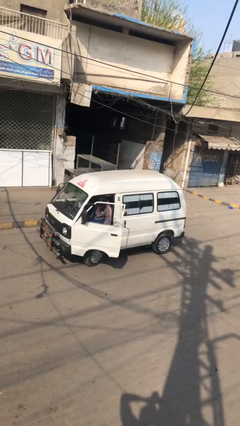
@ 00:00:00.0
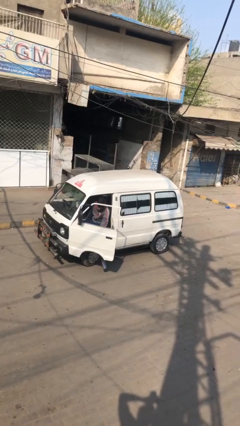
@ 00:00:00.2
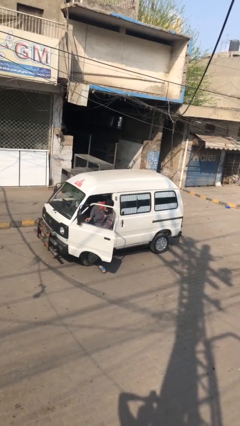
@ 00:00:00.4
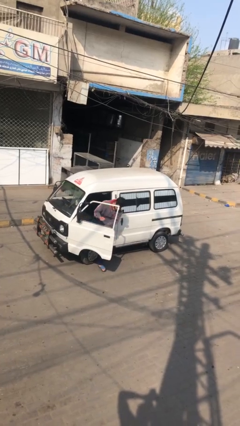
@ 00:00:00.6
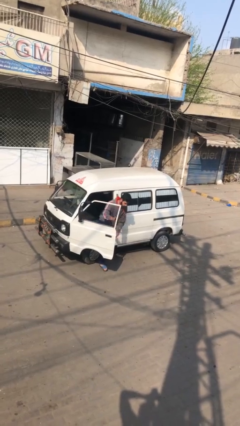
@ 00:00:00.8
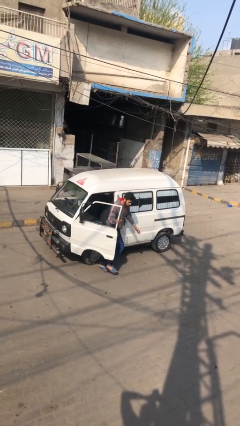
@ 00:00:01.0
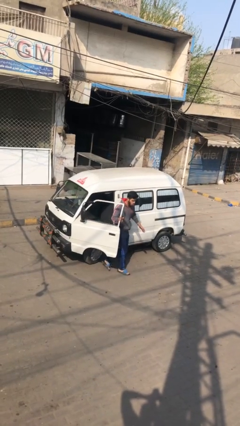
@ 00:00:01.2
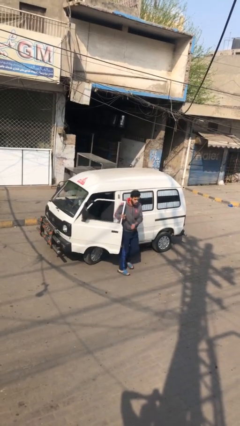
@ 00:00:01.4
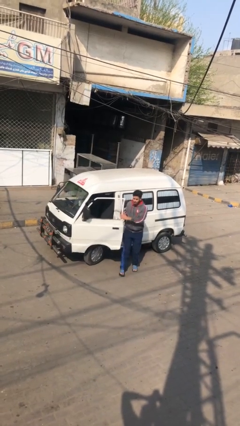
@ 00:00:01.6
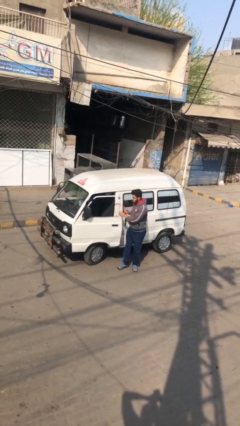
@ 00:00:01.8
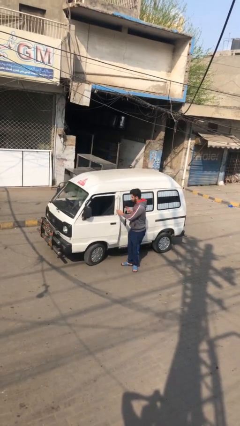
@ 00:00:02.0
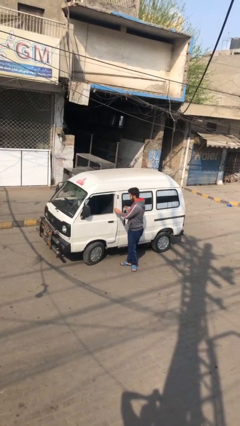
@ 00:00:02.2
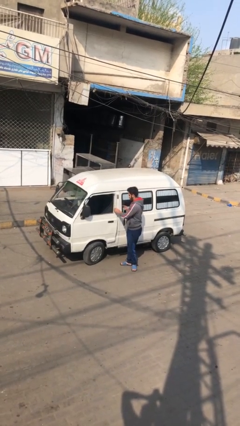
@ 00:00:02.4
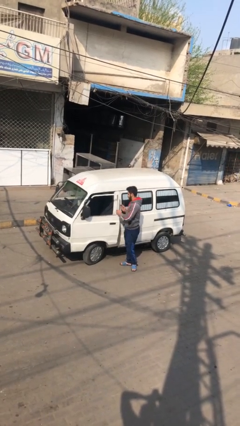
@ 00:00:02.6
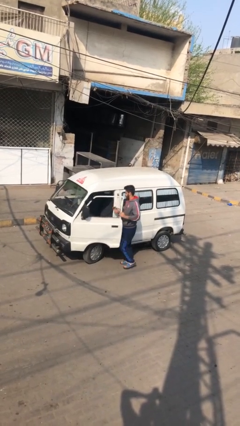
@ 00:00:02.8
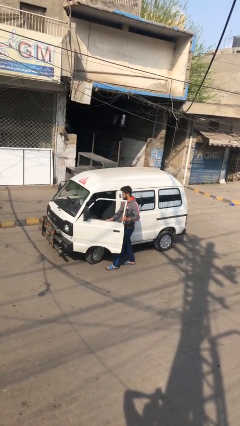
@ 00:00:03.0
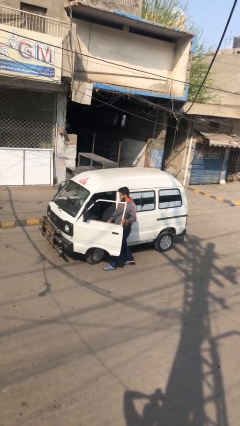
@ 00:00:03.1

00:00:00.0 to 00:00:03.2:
car drops off person

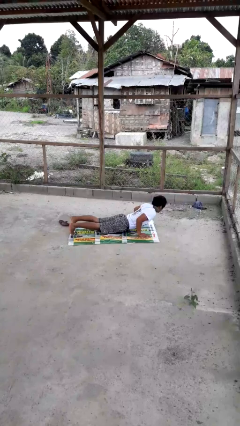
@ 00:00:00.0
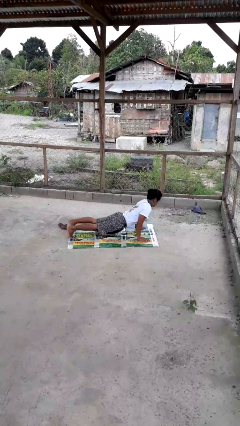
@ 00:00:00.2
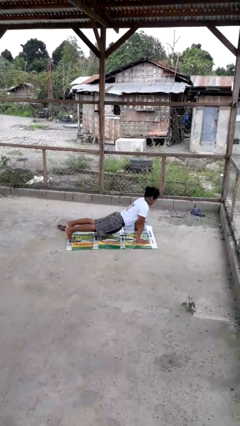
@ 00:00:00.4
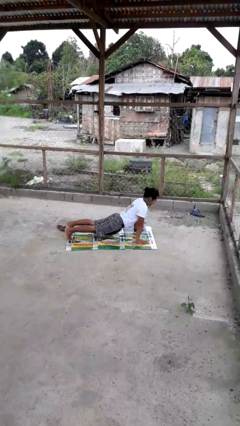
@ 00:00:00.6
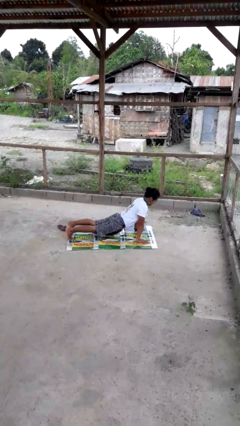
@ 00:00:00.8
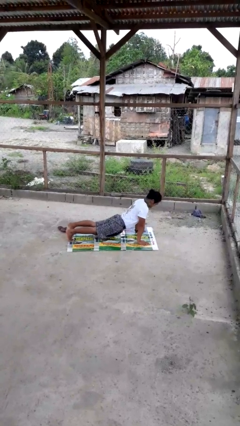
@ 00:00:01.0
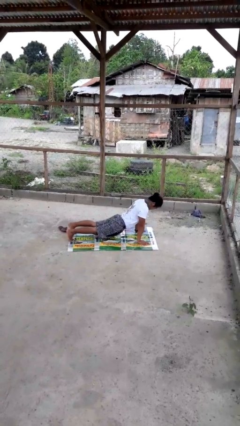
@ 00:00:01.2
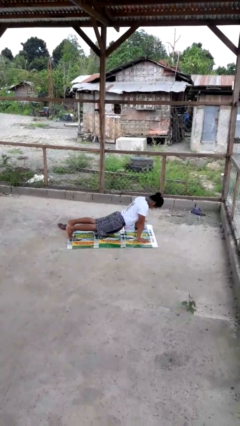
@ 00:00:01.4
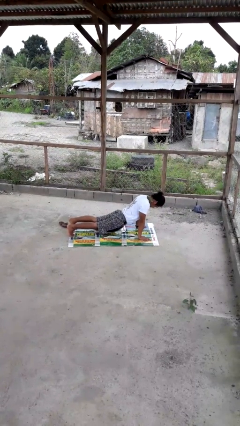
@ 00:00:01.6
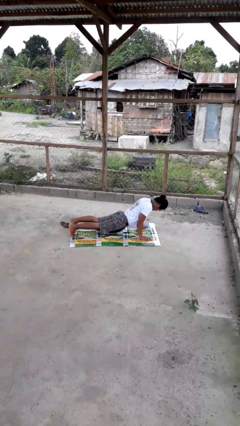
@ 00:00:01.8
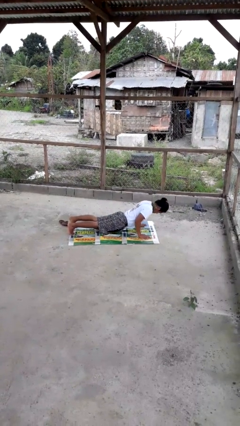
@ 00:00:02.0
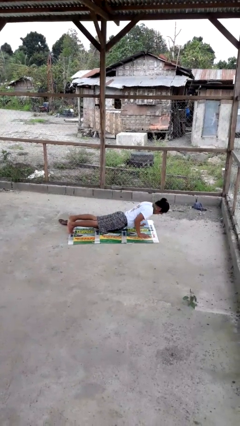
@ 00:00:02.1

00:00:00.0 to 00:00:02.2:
person exercises with pushup

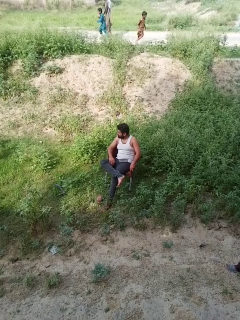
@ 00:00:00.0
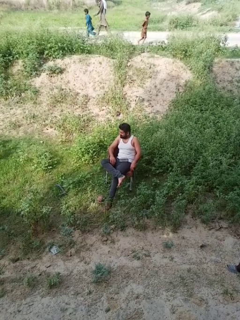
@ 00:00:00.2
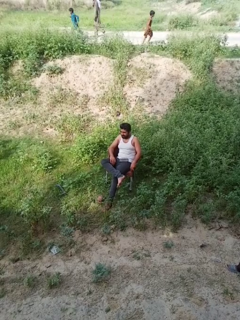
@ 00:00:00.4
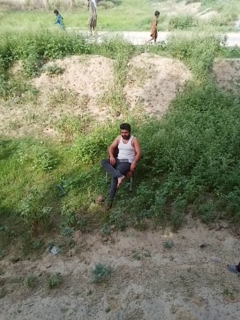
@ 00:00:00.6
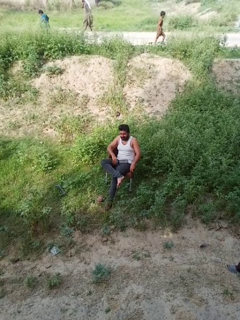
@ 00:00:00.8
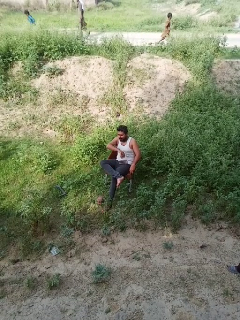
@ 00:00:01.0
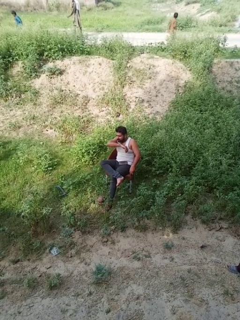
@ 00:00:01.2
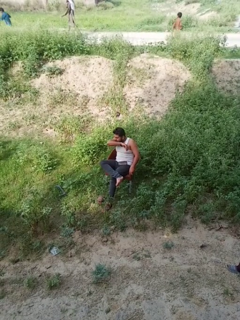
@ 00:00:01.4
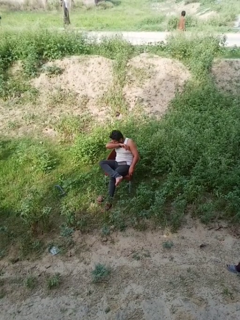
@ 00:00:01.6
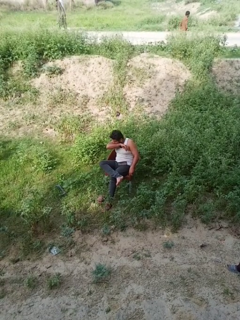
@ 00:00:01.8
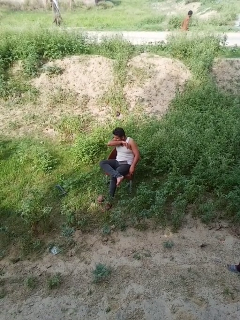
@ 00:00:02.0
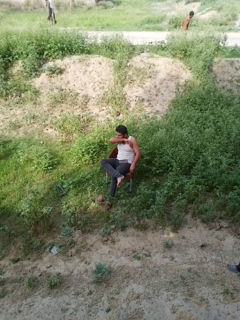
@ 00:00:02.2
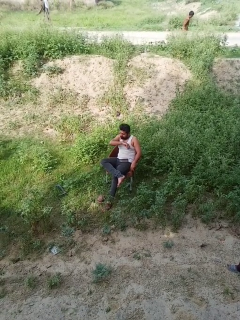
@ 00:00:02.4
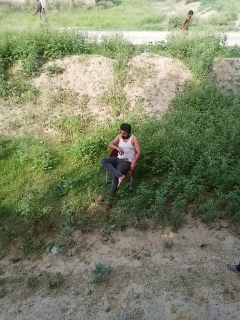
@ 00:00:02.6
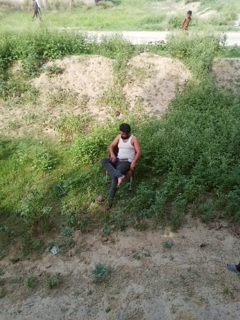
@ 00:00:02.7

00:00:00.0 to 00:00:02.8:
person sneezes into arm

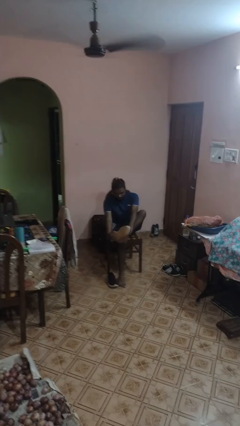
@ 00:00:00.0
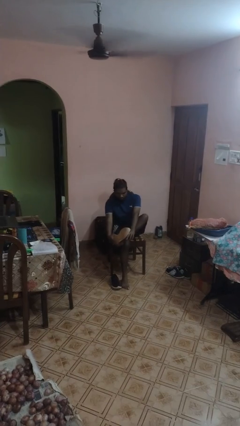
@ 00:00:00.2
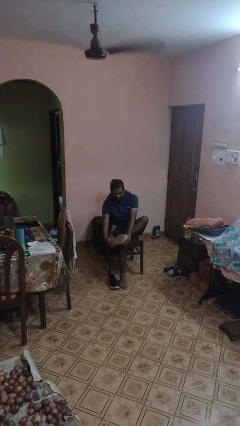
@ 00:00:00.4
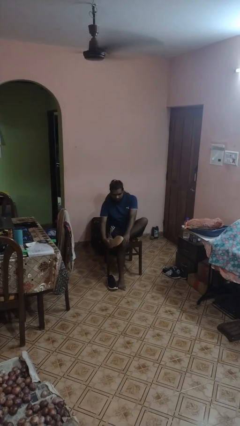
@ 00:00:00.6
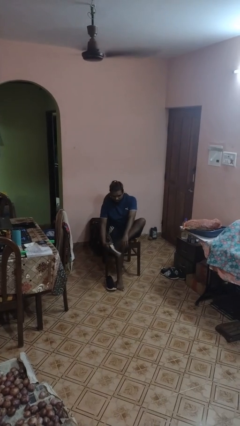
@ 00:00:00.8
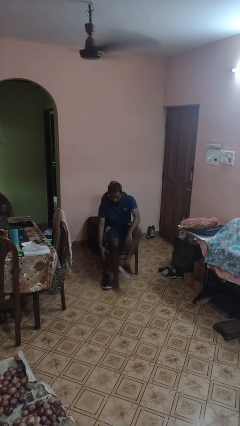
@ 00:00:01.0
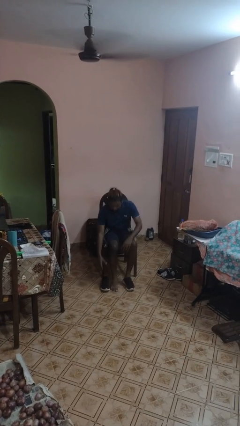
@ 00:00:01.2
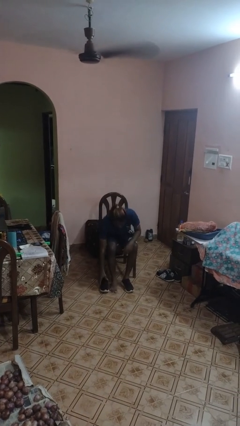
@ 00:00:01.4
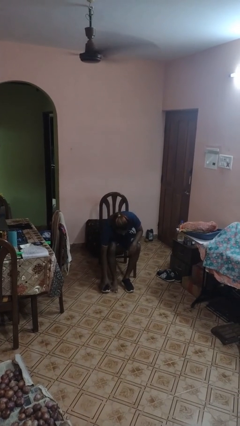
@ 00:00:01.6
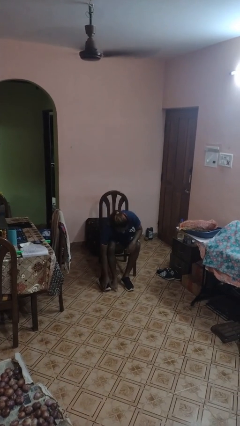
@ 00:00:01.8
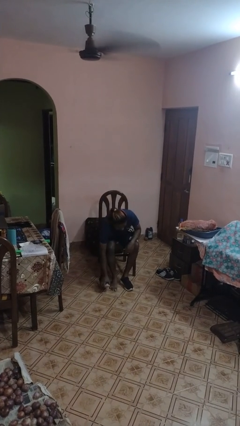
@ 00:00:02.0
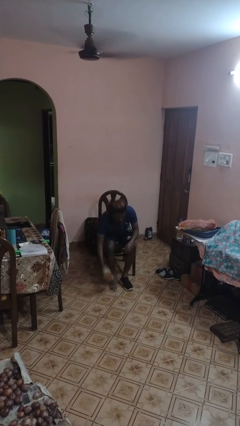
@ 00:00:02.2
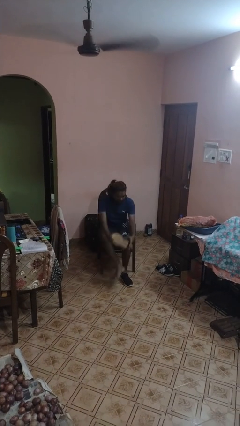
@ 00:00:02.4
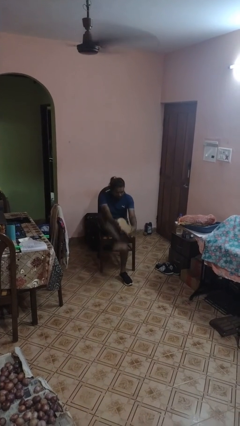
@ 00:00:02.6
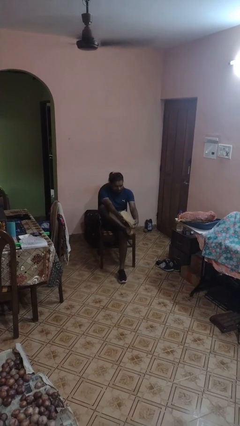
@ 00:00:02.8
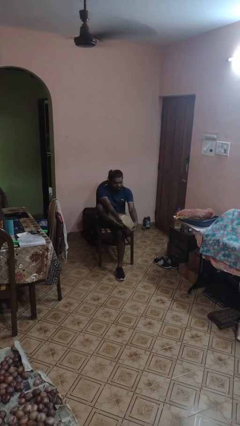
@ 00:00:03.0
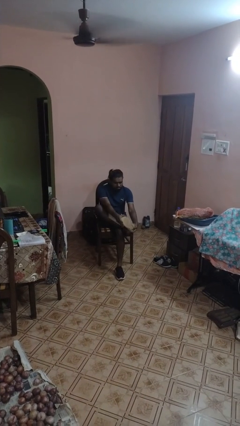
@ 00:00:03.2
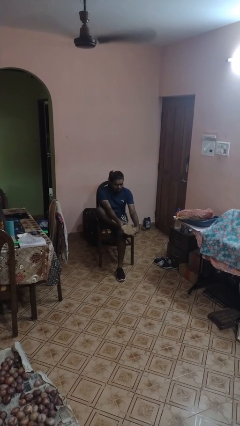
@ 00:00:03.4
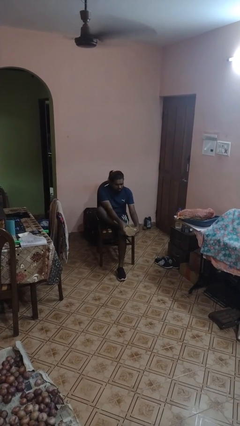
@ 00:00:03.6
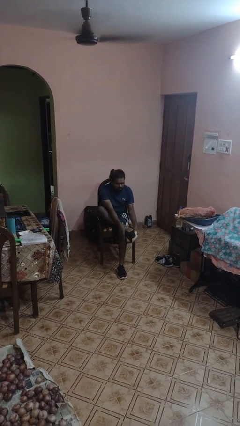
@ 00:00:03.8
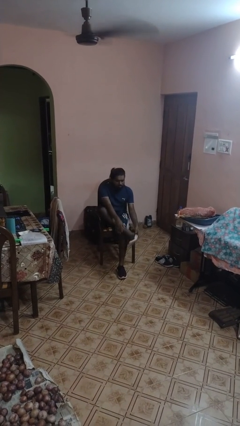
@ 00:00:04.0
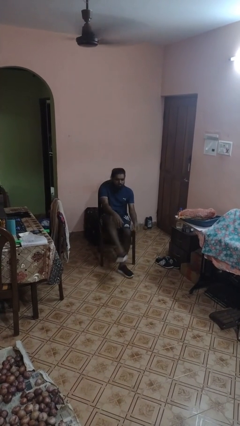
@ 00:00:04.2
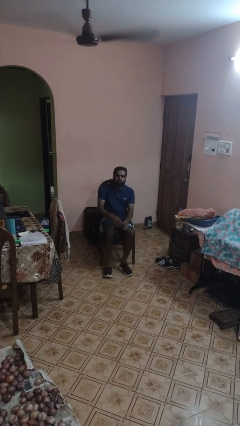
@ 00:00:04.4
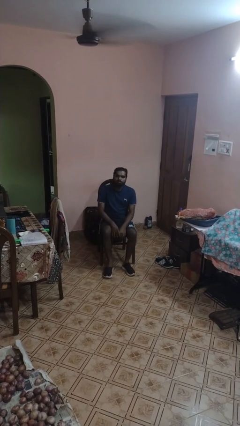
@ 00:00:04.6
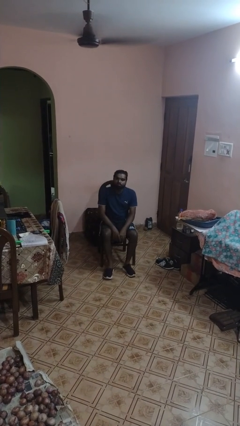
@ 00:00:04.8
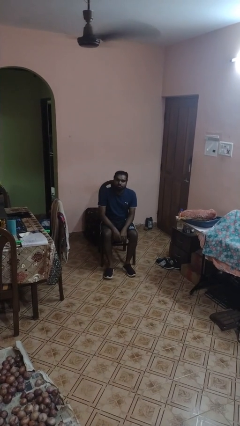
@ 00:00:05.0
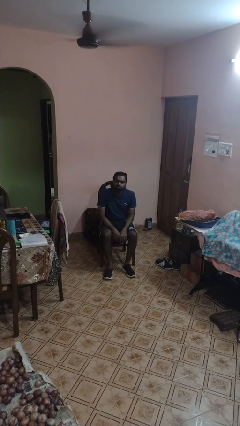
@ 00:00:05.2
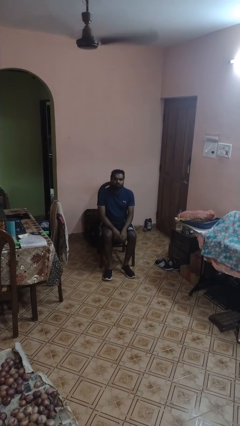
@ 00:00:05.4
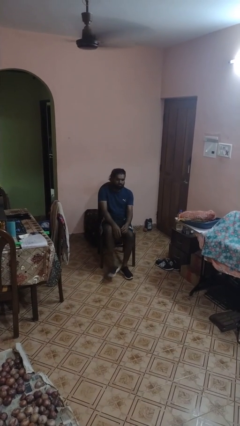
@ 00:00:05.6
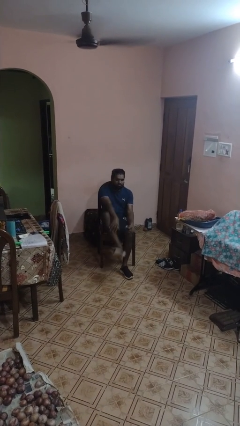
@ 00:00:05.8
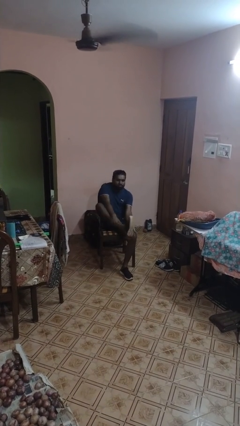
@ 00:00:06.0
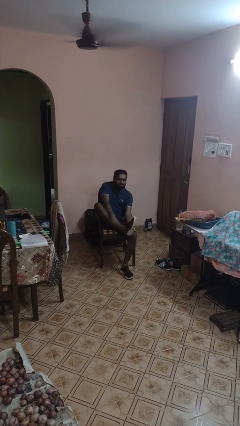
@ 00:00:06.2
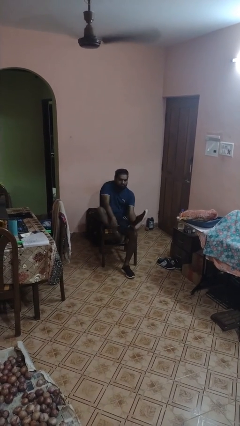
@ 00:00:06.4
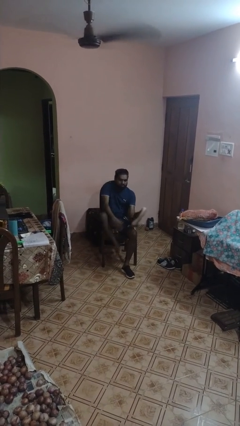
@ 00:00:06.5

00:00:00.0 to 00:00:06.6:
person puts on shoes

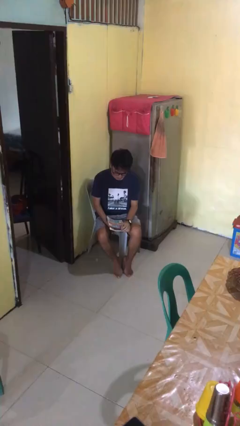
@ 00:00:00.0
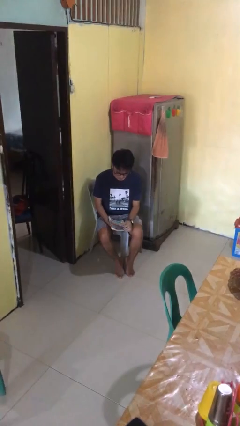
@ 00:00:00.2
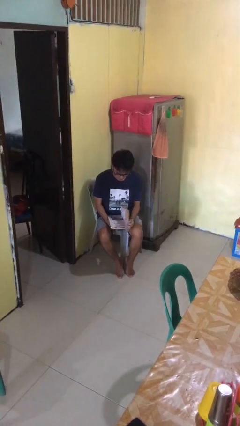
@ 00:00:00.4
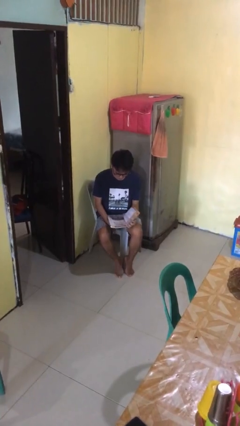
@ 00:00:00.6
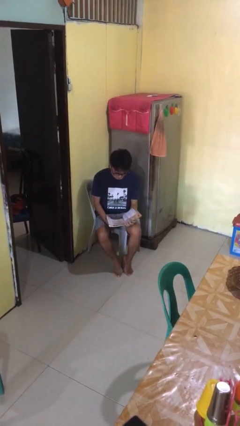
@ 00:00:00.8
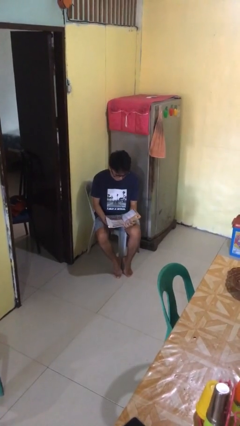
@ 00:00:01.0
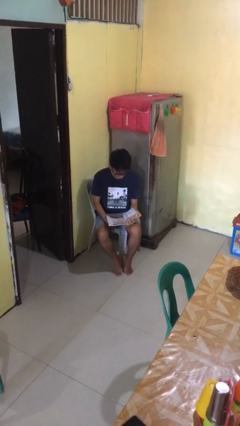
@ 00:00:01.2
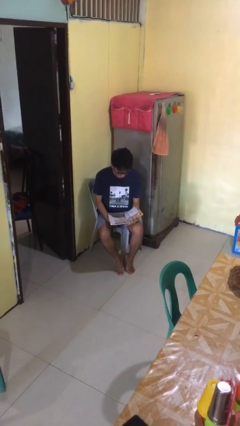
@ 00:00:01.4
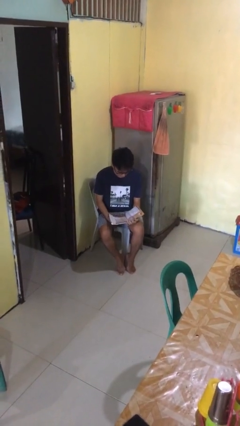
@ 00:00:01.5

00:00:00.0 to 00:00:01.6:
person reads magazine

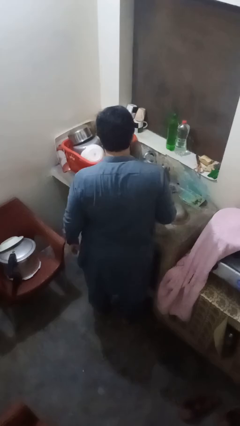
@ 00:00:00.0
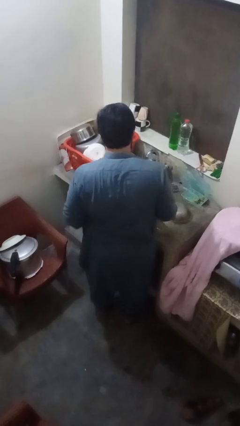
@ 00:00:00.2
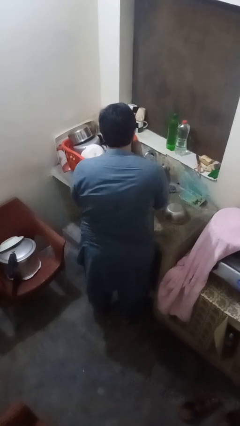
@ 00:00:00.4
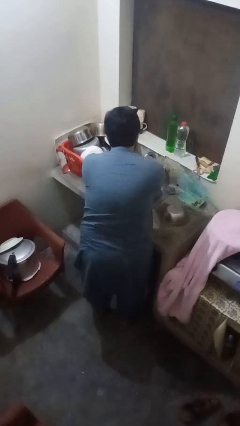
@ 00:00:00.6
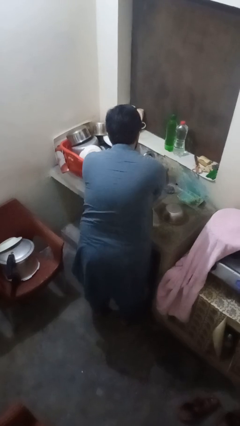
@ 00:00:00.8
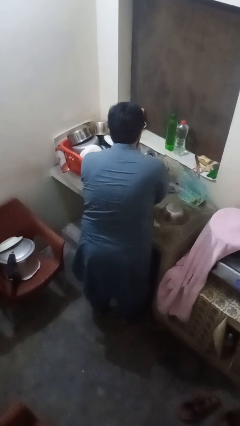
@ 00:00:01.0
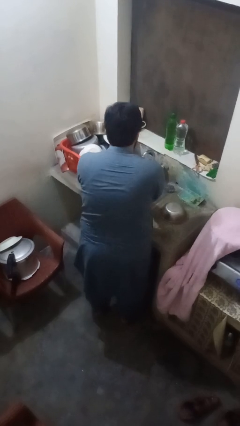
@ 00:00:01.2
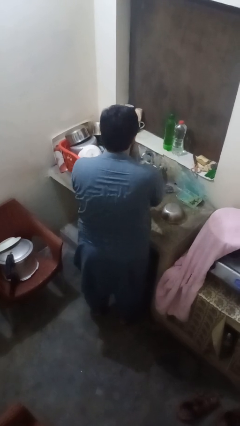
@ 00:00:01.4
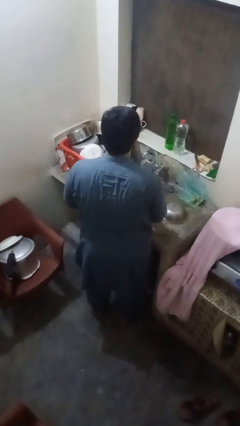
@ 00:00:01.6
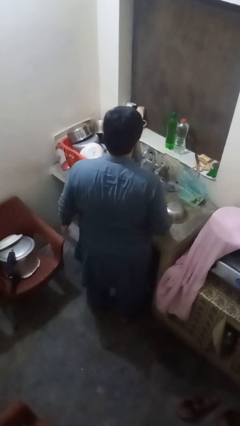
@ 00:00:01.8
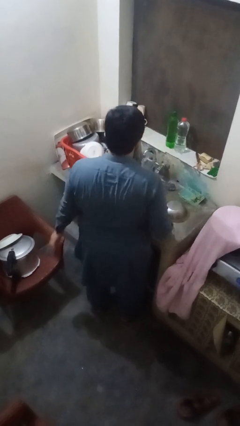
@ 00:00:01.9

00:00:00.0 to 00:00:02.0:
person washes hands
